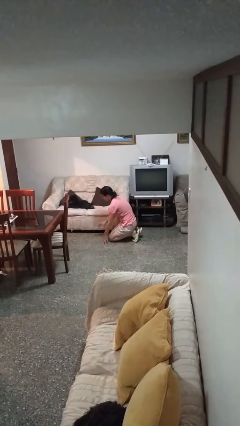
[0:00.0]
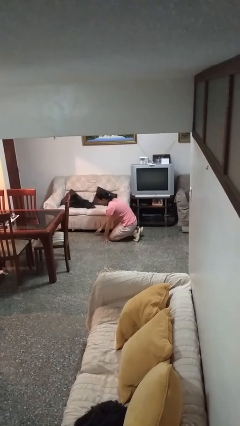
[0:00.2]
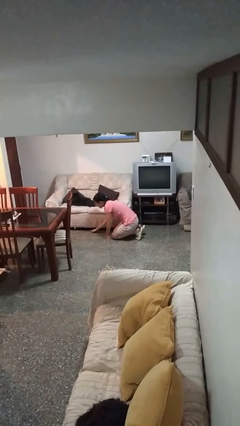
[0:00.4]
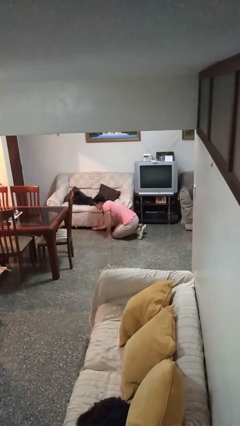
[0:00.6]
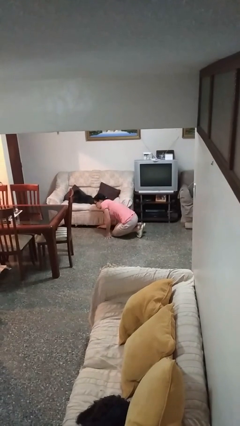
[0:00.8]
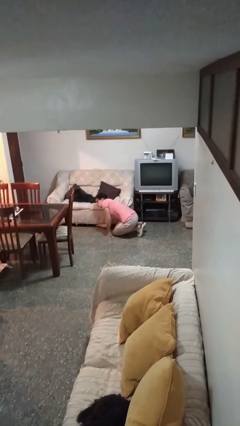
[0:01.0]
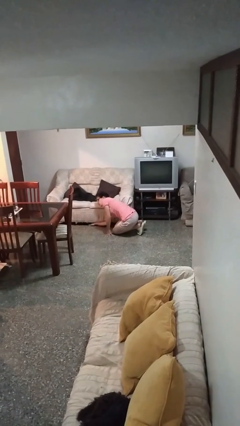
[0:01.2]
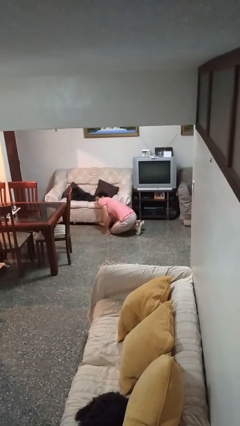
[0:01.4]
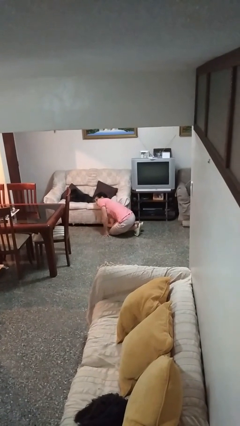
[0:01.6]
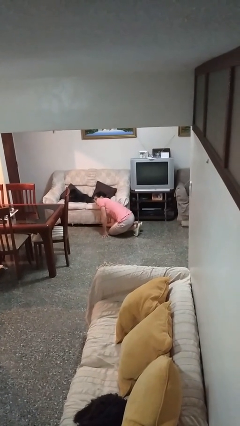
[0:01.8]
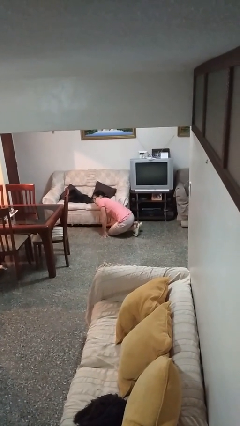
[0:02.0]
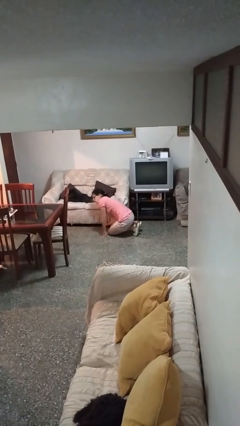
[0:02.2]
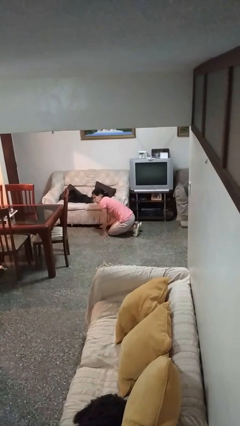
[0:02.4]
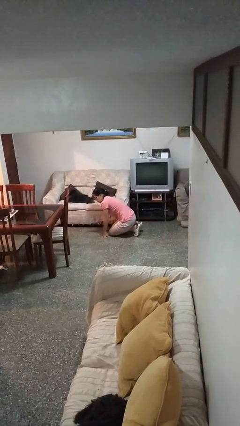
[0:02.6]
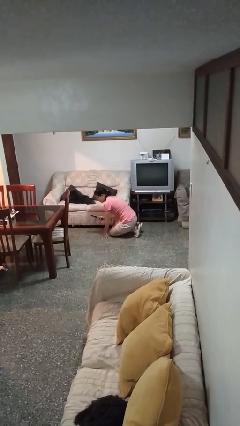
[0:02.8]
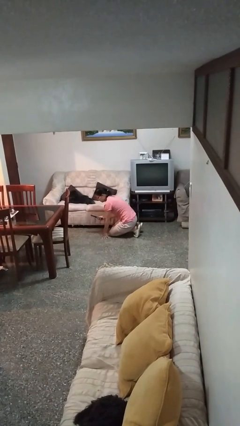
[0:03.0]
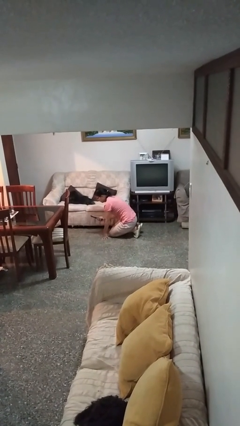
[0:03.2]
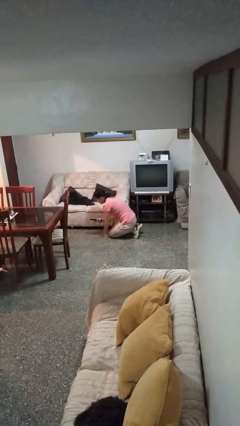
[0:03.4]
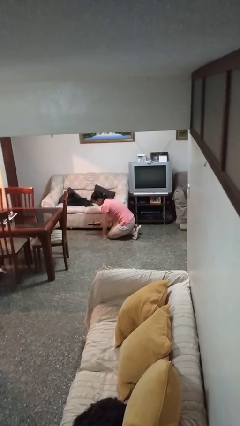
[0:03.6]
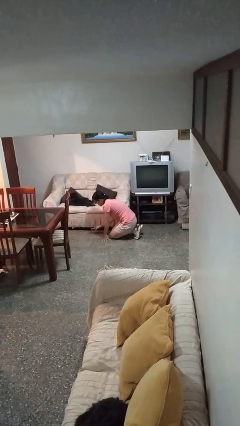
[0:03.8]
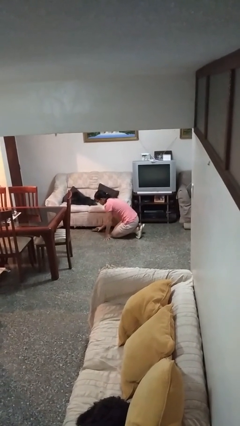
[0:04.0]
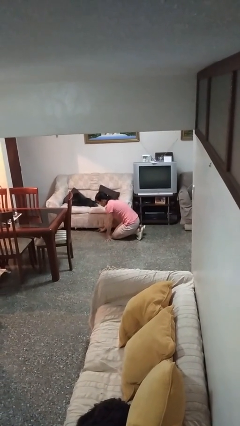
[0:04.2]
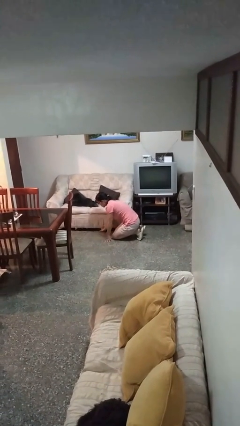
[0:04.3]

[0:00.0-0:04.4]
person searches under couch

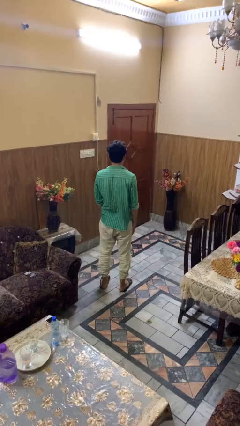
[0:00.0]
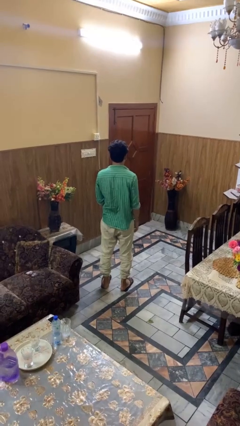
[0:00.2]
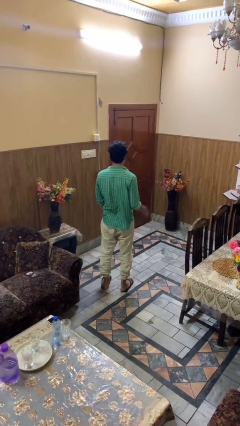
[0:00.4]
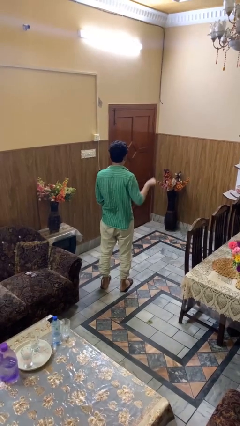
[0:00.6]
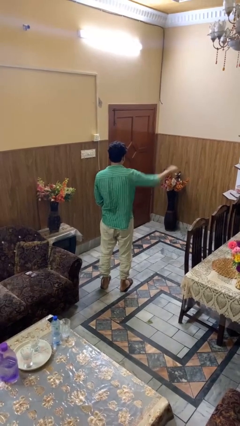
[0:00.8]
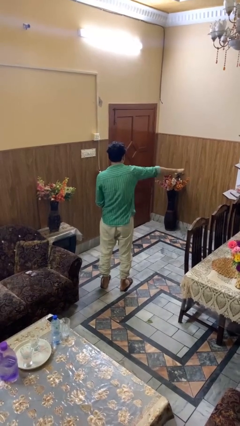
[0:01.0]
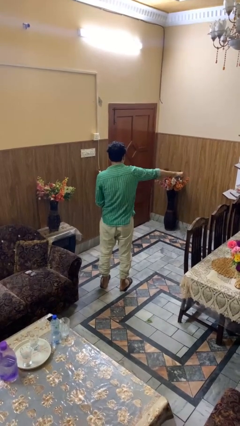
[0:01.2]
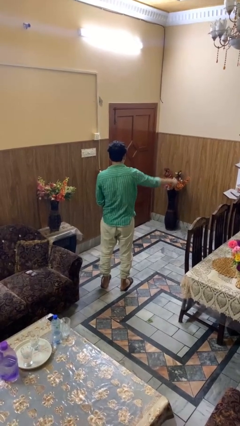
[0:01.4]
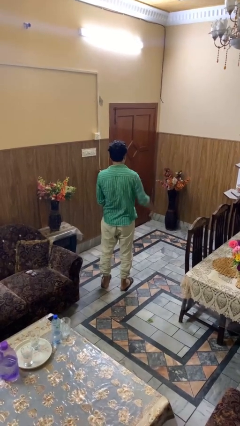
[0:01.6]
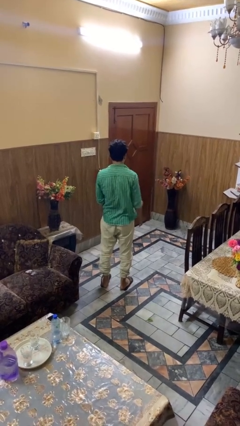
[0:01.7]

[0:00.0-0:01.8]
person punches

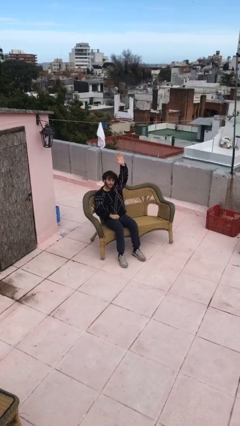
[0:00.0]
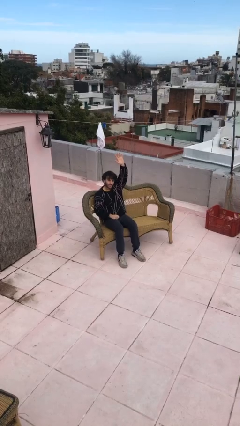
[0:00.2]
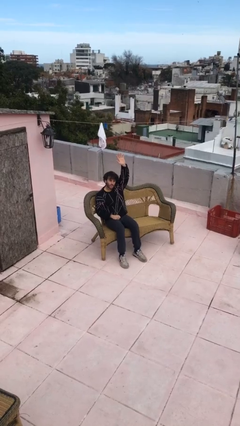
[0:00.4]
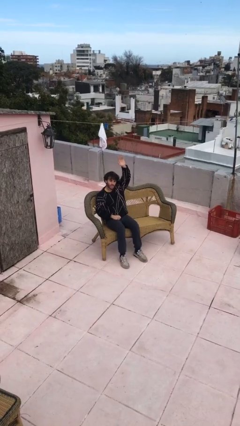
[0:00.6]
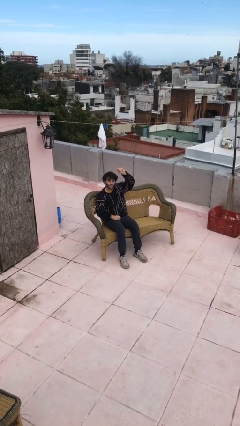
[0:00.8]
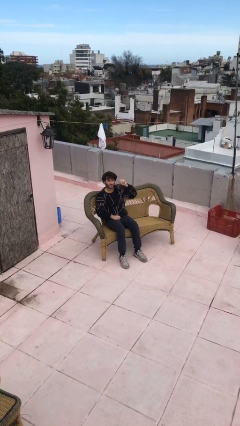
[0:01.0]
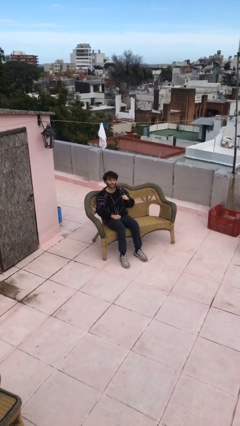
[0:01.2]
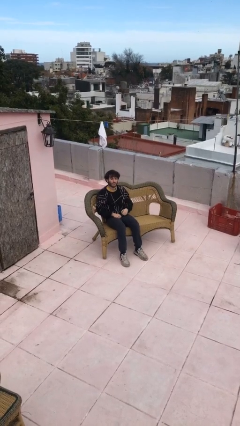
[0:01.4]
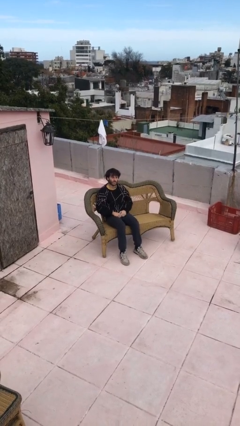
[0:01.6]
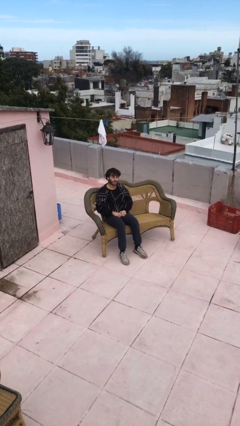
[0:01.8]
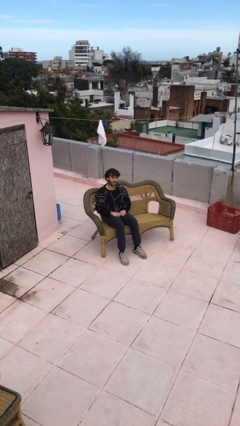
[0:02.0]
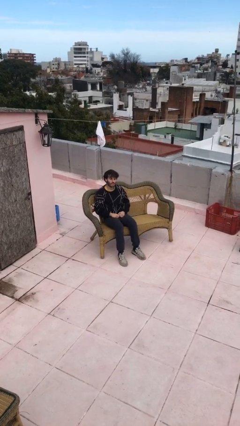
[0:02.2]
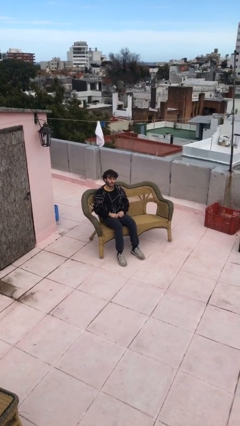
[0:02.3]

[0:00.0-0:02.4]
person gestures lower hand

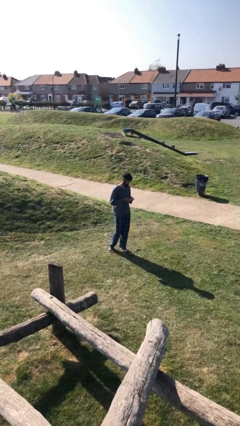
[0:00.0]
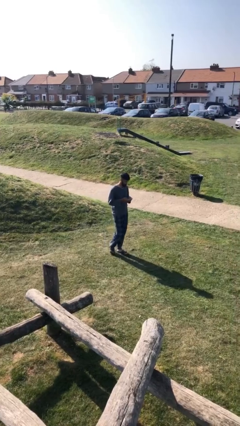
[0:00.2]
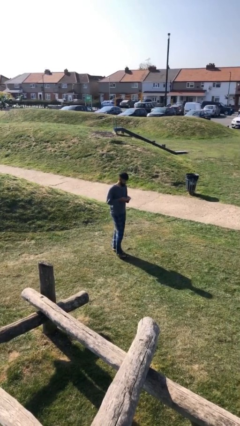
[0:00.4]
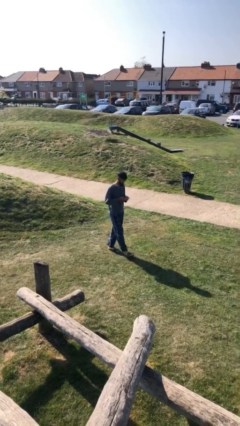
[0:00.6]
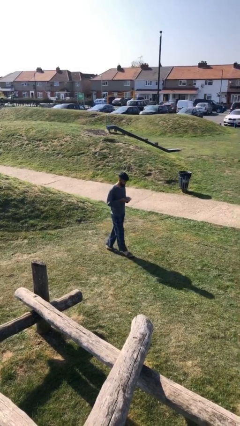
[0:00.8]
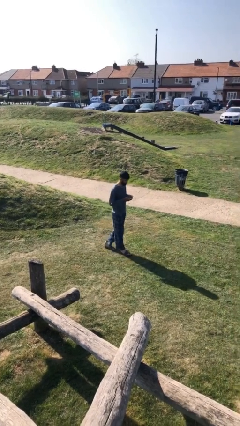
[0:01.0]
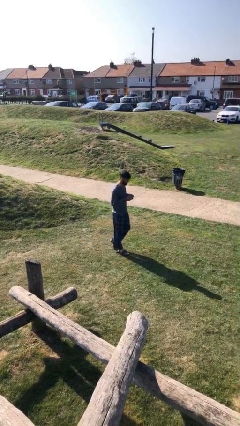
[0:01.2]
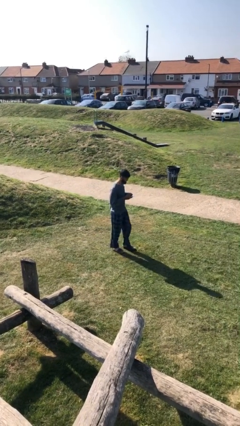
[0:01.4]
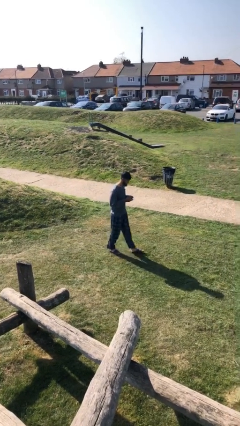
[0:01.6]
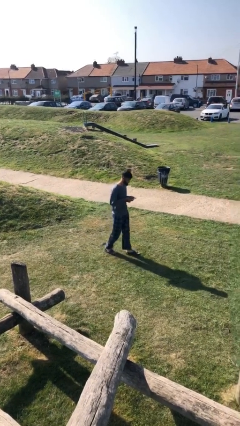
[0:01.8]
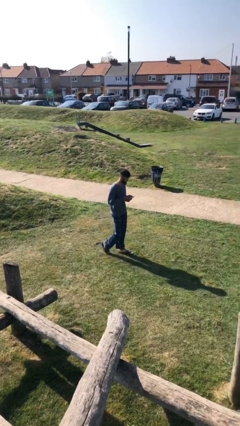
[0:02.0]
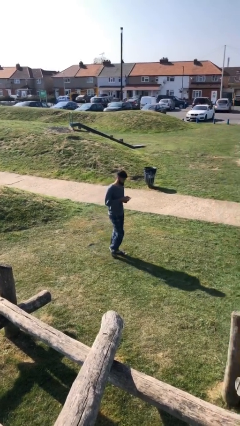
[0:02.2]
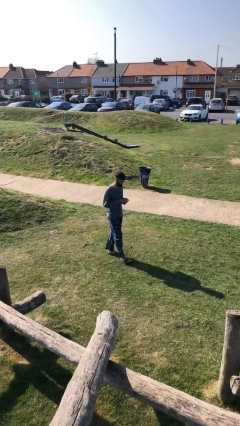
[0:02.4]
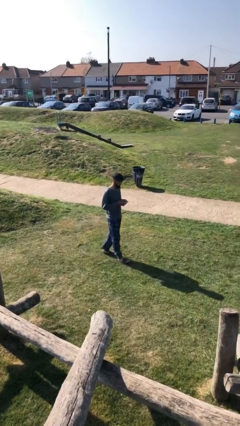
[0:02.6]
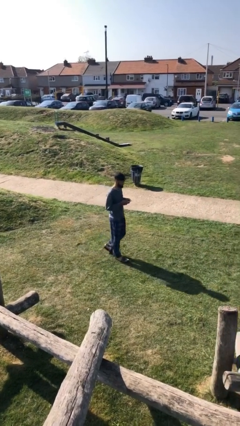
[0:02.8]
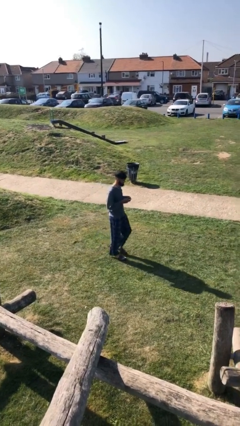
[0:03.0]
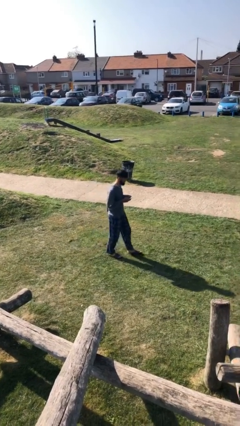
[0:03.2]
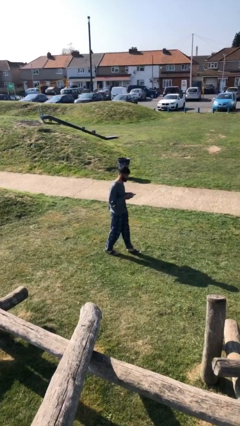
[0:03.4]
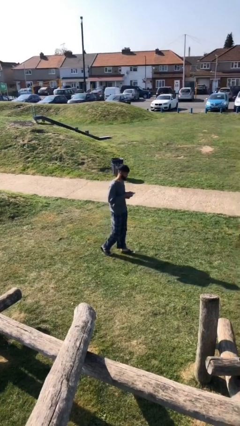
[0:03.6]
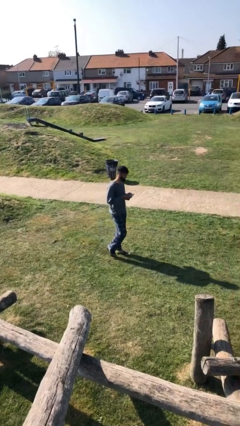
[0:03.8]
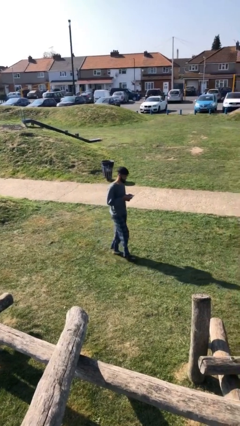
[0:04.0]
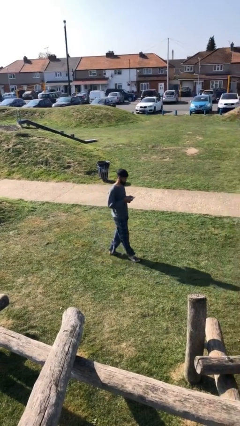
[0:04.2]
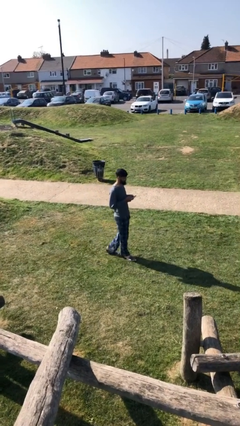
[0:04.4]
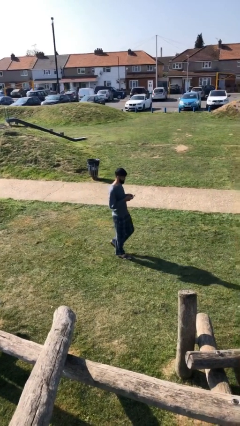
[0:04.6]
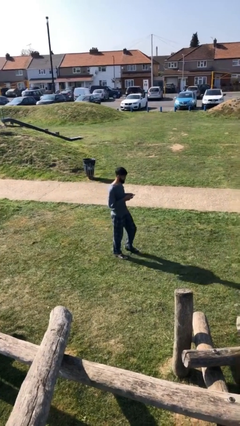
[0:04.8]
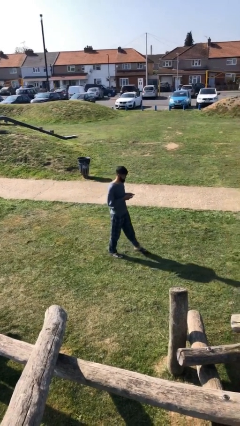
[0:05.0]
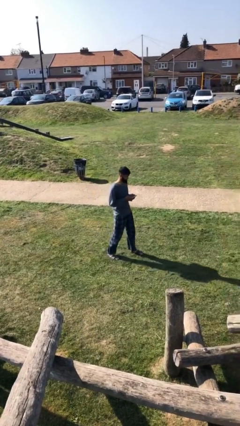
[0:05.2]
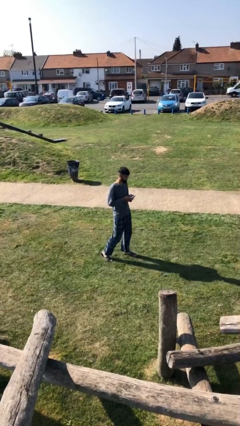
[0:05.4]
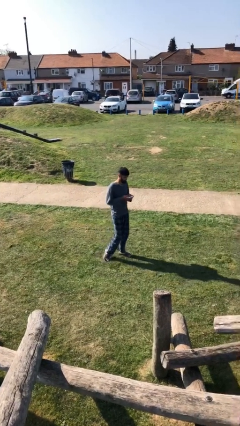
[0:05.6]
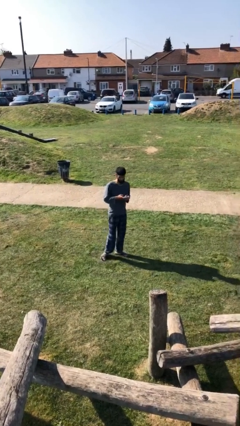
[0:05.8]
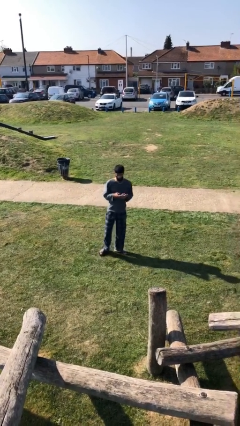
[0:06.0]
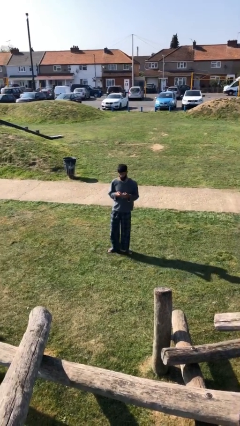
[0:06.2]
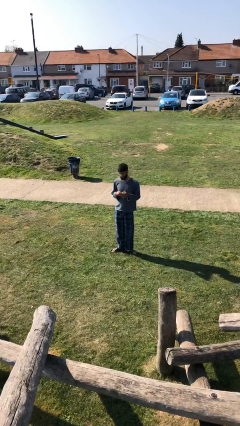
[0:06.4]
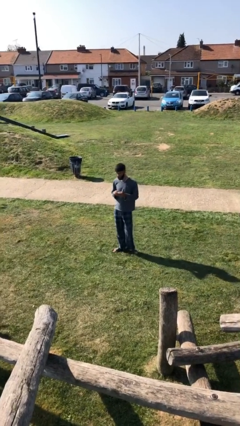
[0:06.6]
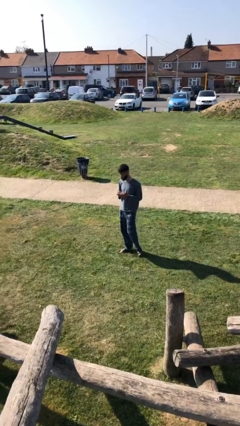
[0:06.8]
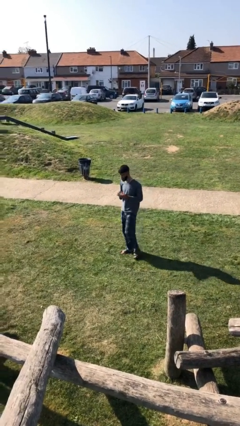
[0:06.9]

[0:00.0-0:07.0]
person texts on phone

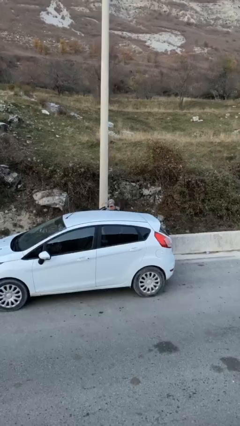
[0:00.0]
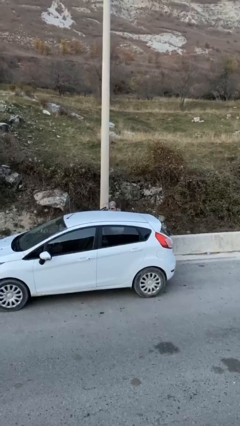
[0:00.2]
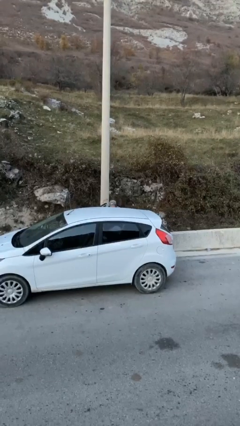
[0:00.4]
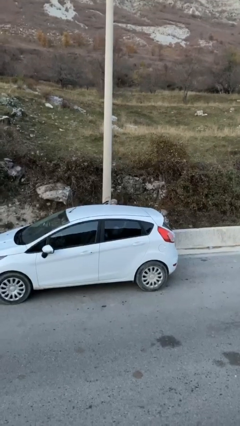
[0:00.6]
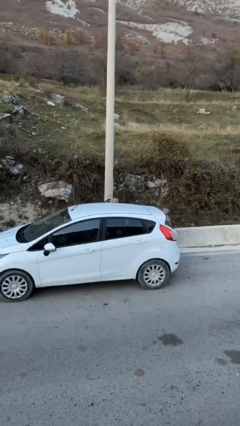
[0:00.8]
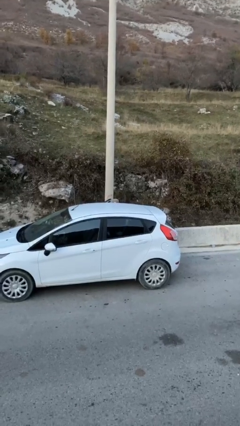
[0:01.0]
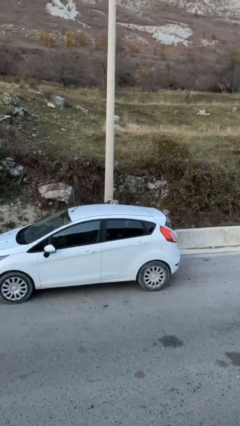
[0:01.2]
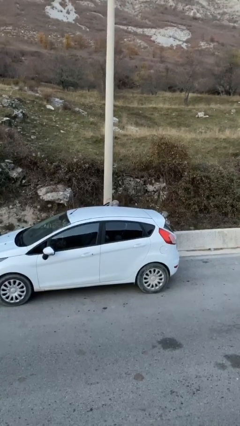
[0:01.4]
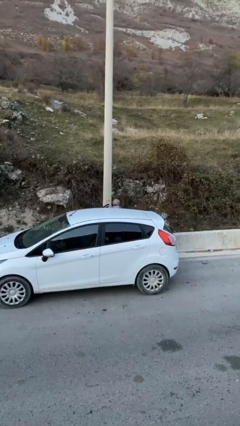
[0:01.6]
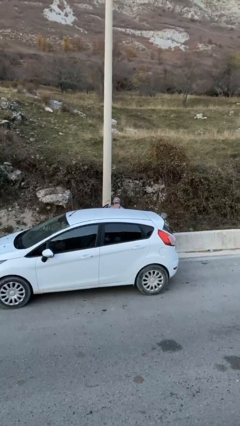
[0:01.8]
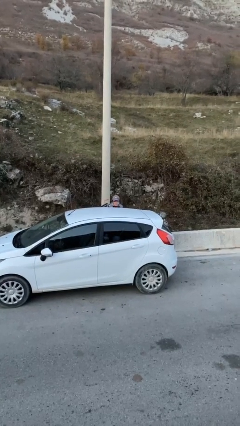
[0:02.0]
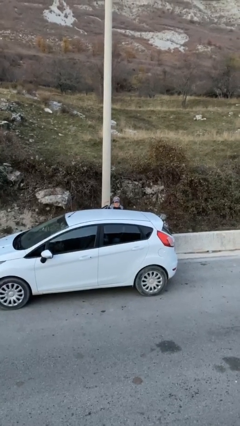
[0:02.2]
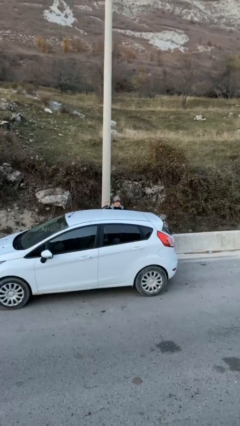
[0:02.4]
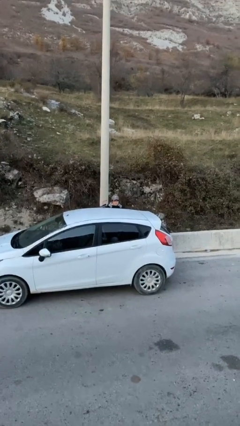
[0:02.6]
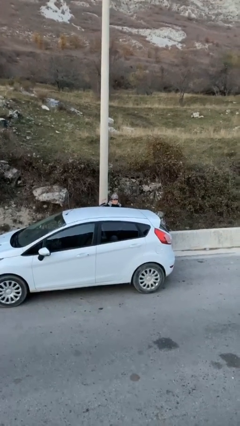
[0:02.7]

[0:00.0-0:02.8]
person loads car
